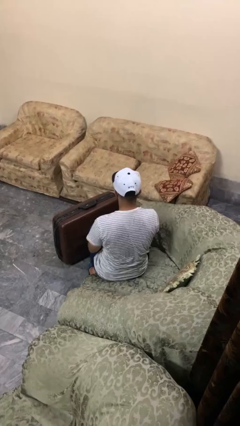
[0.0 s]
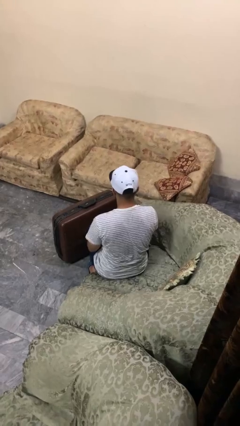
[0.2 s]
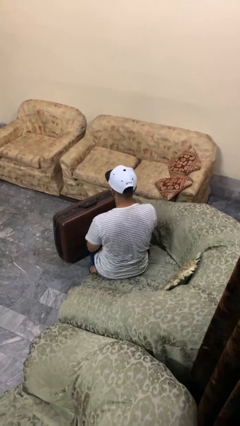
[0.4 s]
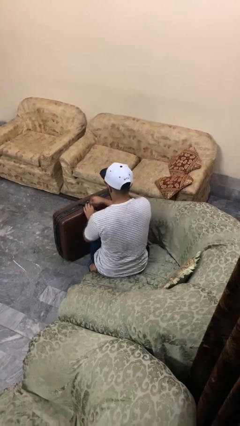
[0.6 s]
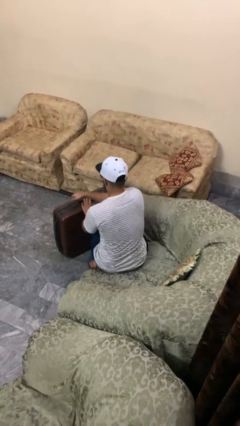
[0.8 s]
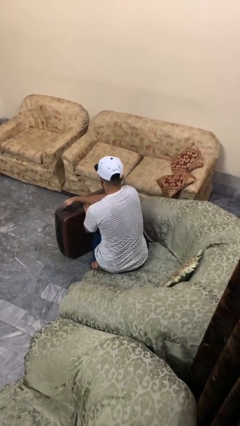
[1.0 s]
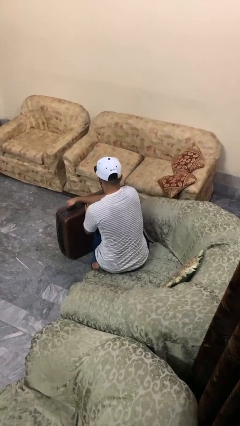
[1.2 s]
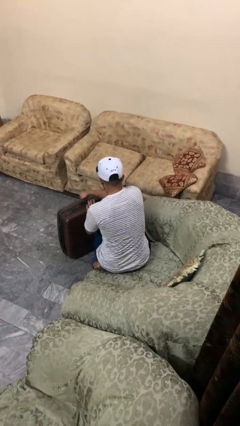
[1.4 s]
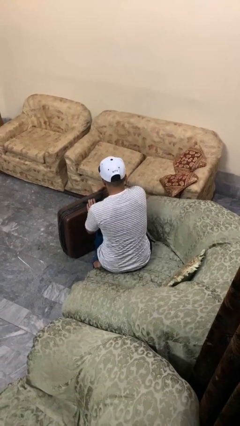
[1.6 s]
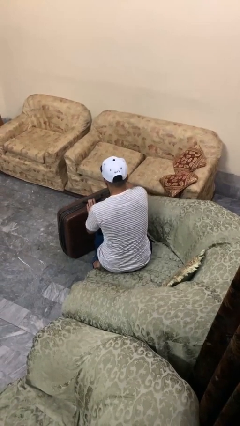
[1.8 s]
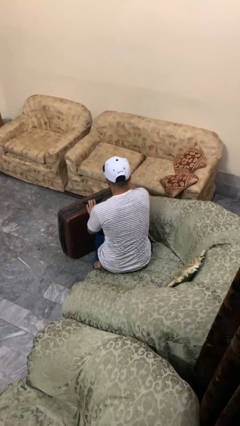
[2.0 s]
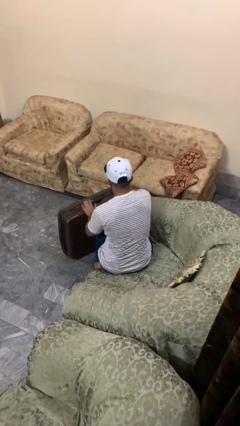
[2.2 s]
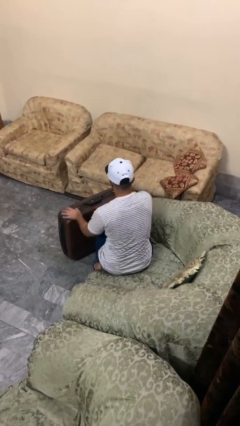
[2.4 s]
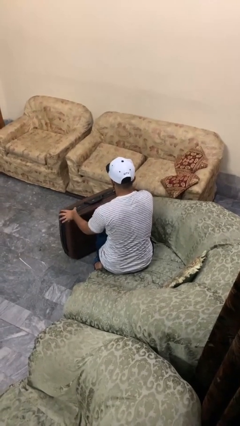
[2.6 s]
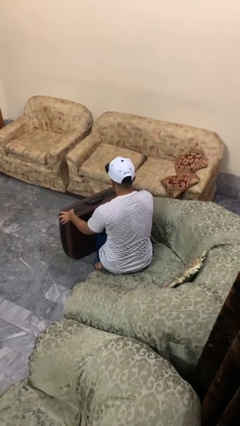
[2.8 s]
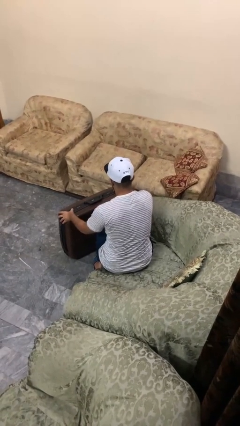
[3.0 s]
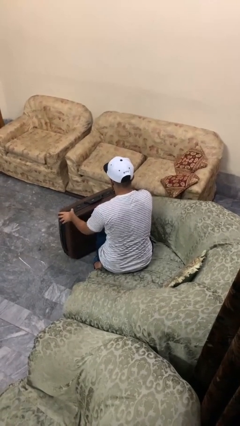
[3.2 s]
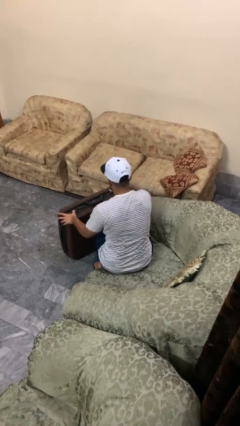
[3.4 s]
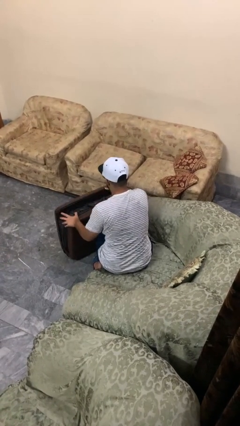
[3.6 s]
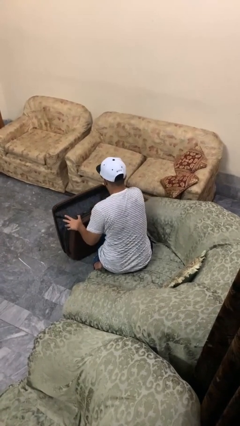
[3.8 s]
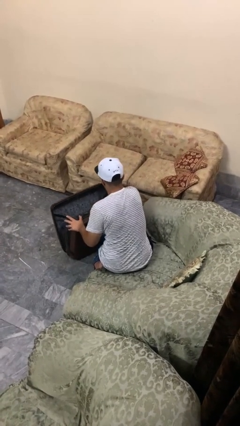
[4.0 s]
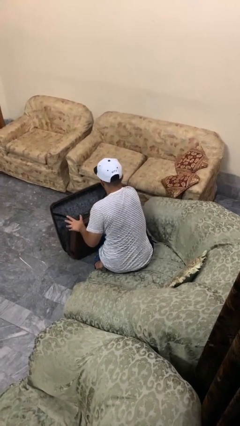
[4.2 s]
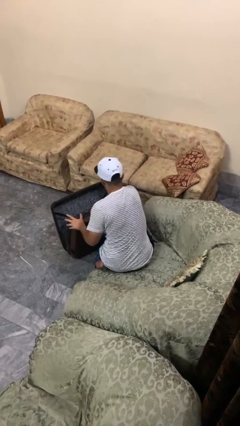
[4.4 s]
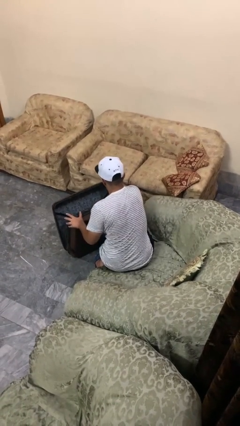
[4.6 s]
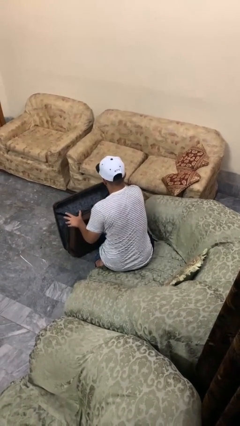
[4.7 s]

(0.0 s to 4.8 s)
person opens suitcase

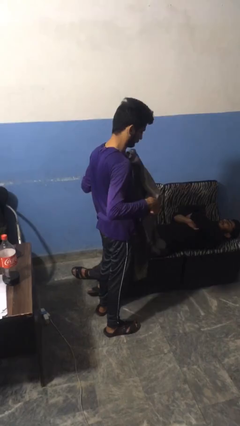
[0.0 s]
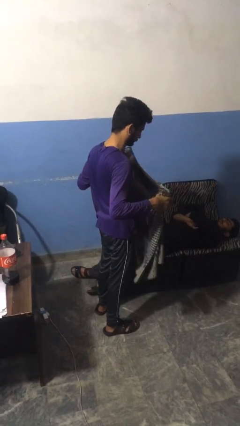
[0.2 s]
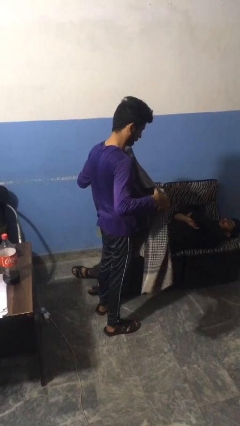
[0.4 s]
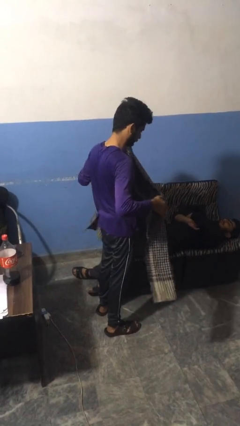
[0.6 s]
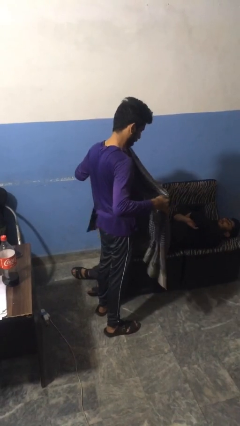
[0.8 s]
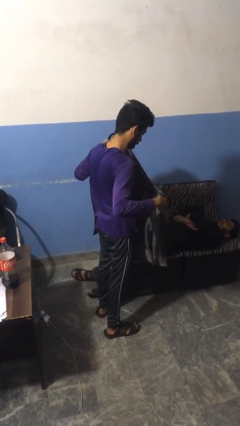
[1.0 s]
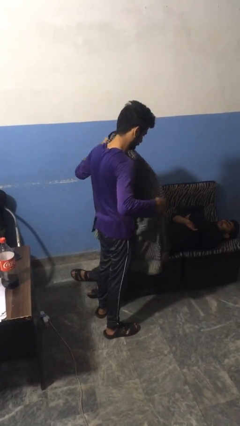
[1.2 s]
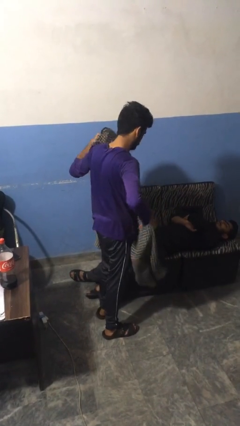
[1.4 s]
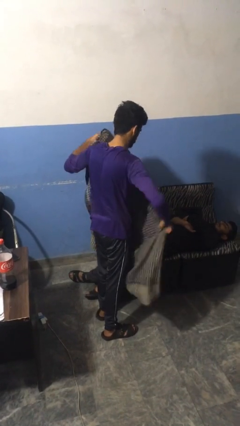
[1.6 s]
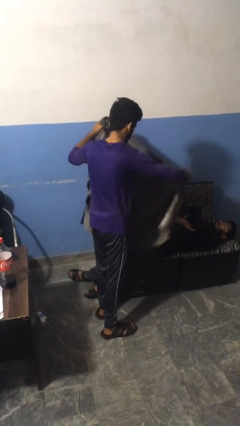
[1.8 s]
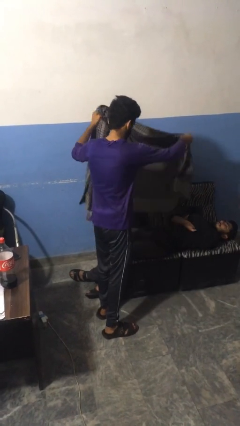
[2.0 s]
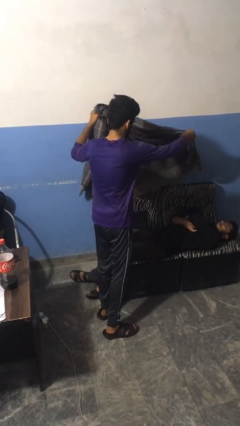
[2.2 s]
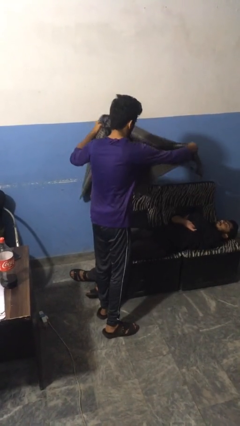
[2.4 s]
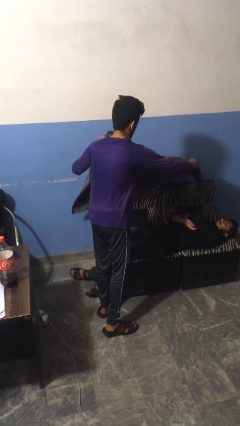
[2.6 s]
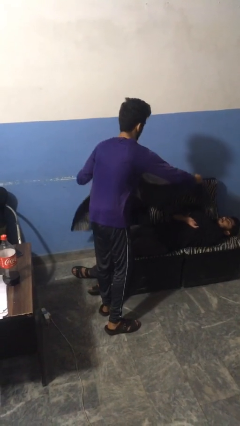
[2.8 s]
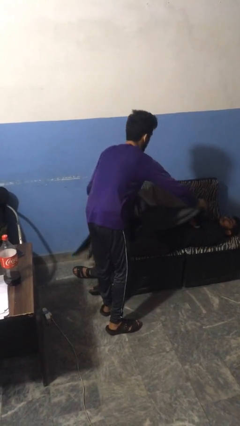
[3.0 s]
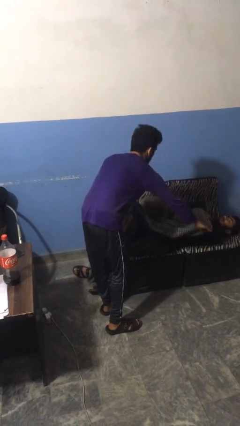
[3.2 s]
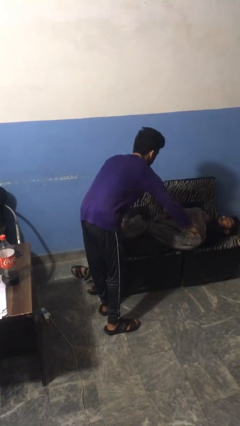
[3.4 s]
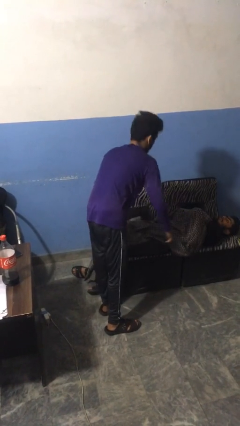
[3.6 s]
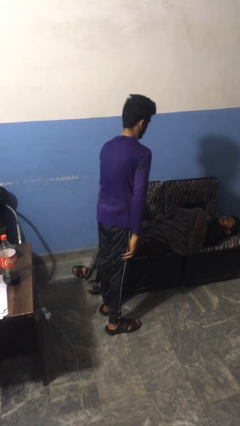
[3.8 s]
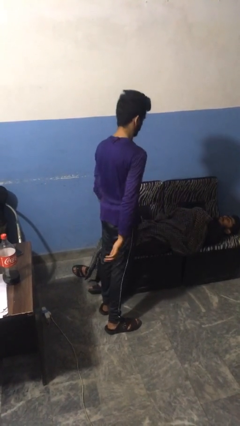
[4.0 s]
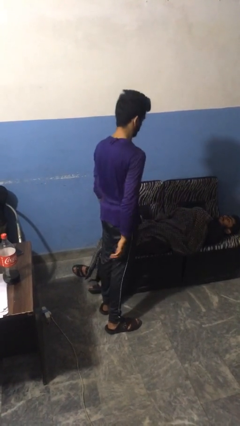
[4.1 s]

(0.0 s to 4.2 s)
person covers friend with blanket

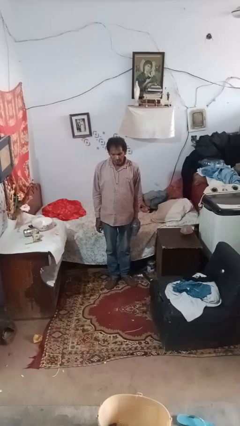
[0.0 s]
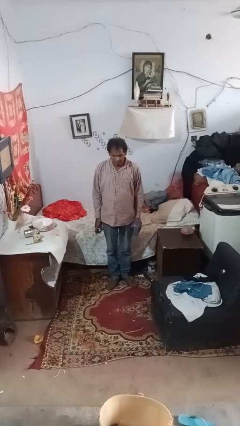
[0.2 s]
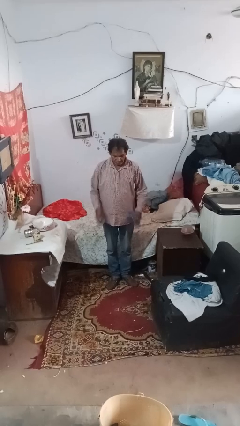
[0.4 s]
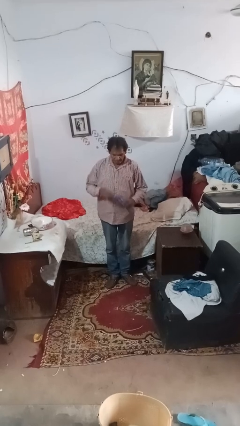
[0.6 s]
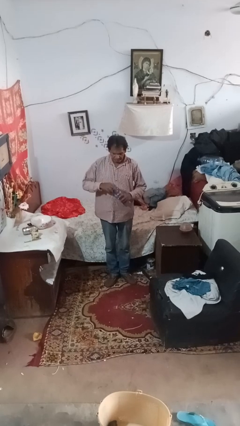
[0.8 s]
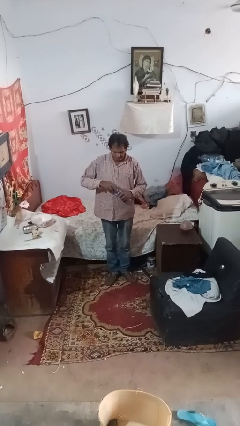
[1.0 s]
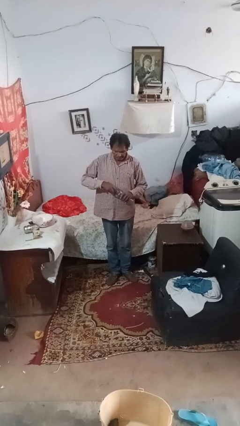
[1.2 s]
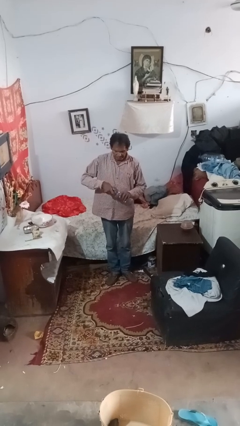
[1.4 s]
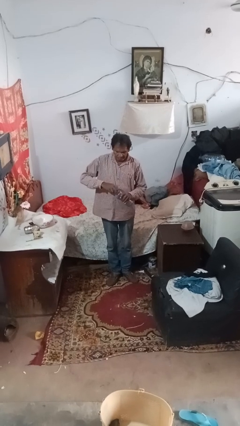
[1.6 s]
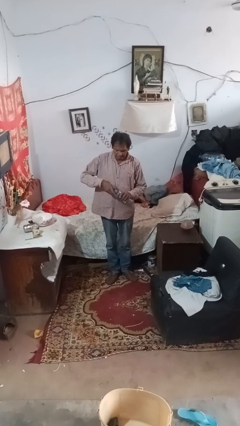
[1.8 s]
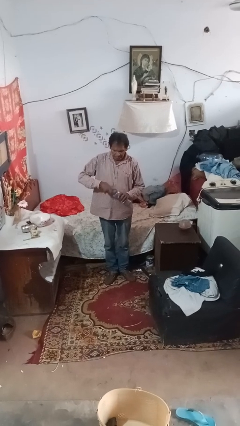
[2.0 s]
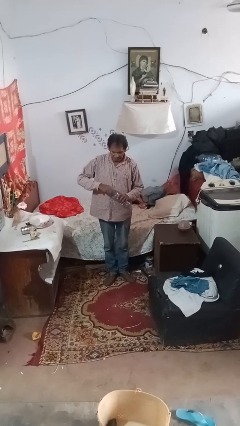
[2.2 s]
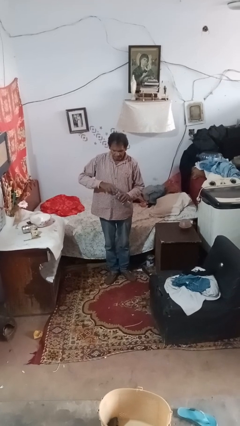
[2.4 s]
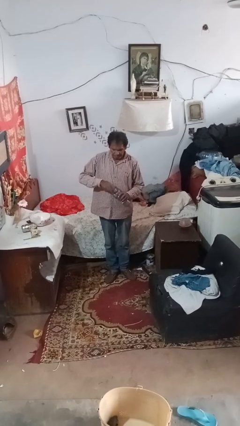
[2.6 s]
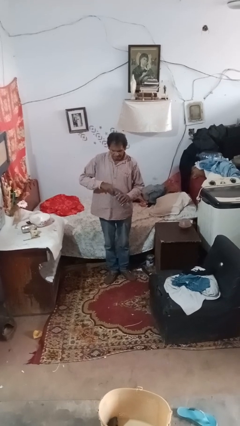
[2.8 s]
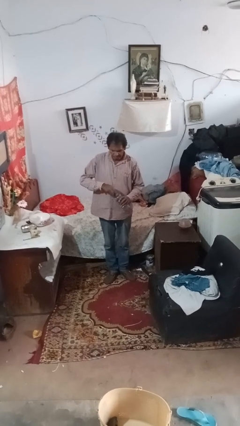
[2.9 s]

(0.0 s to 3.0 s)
person screws lid to bottle

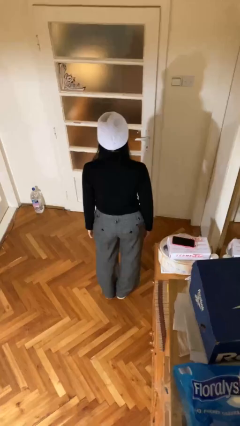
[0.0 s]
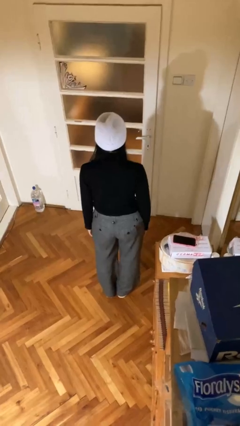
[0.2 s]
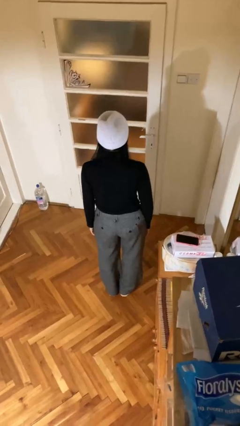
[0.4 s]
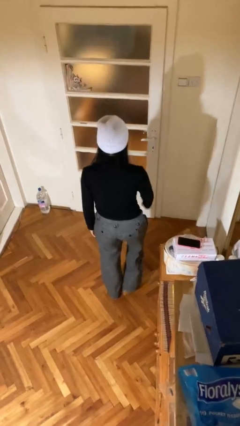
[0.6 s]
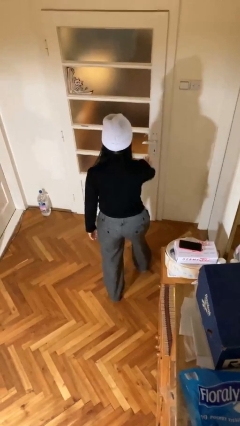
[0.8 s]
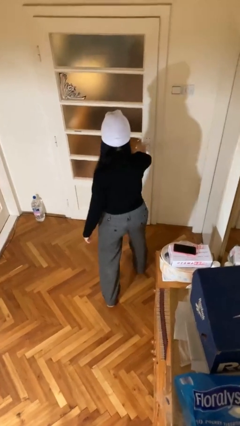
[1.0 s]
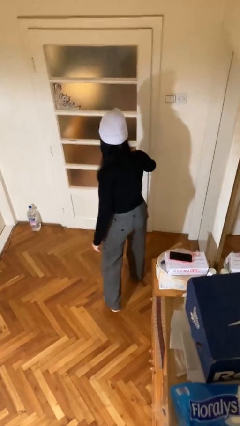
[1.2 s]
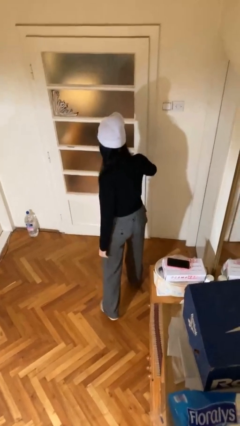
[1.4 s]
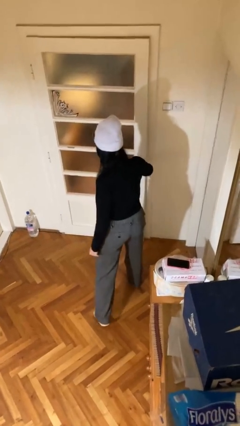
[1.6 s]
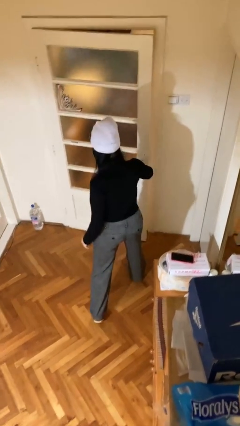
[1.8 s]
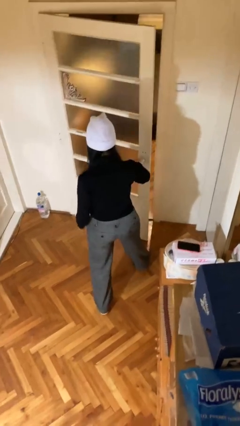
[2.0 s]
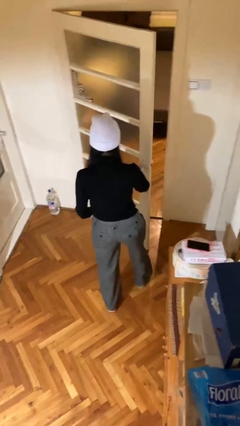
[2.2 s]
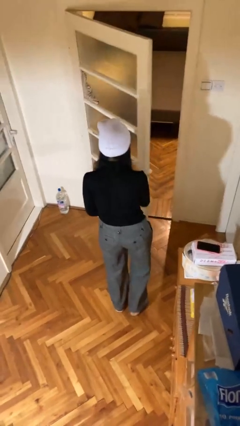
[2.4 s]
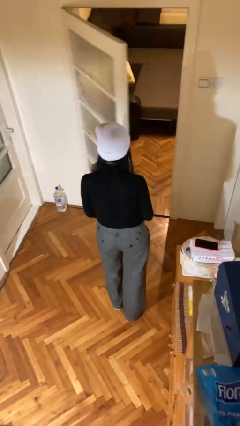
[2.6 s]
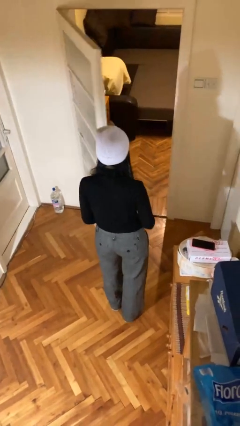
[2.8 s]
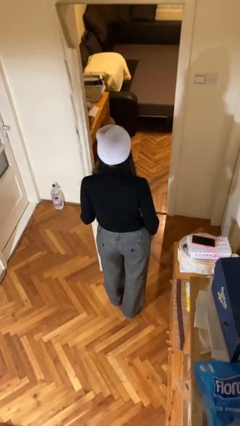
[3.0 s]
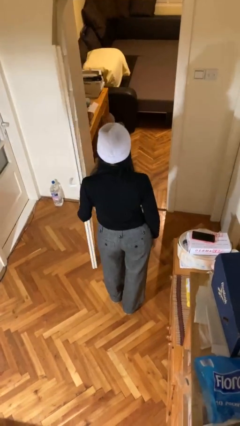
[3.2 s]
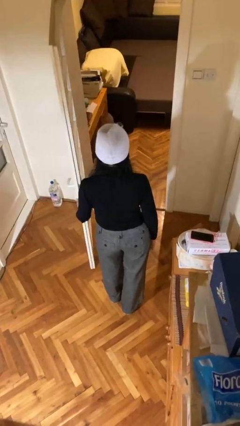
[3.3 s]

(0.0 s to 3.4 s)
person opens facility door

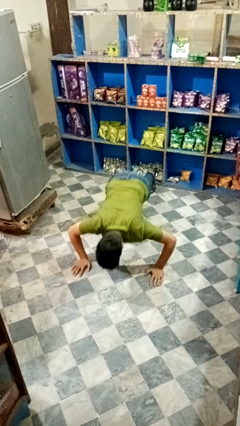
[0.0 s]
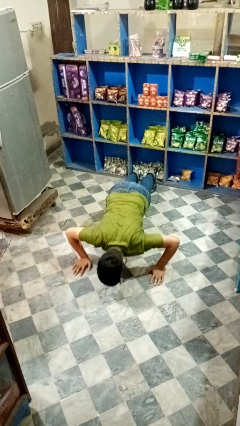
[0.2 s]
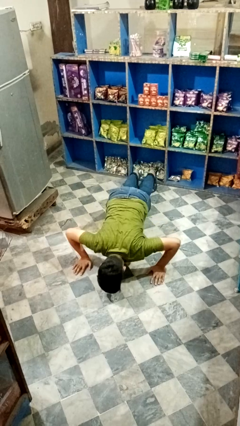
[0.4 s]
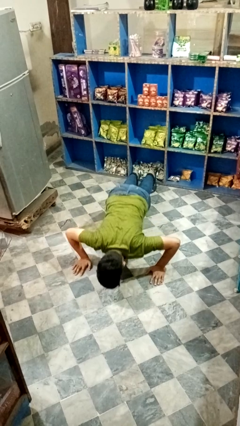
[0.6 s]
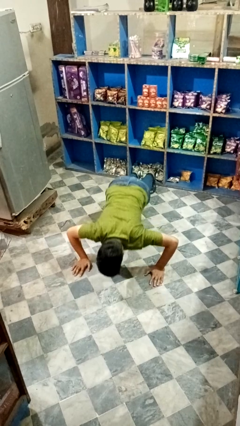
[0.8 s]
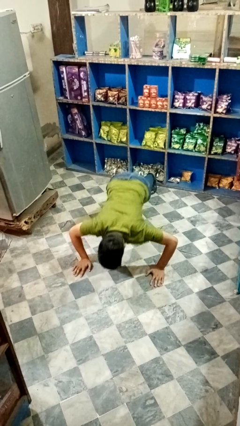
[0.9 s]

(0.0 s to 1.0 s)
person exercises with pushup

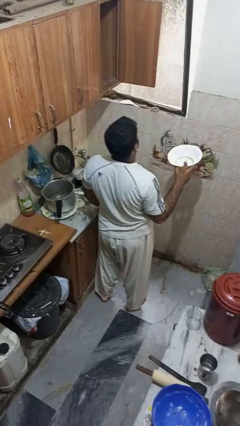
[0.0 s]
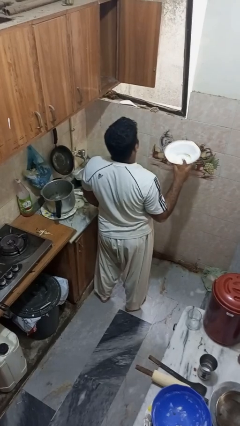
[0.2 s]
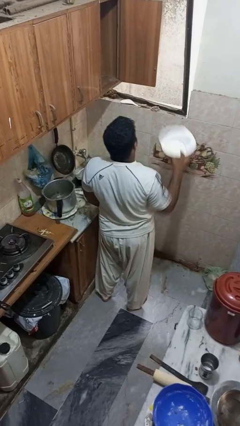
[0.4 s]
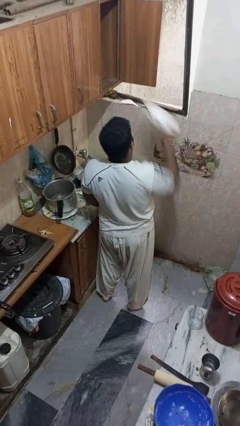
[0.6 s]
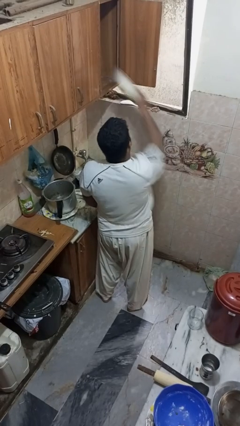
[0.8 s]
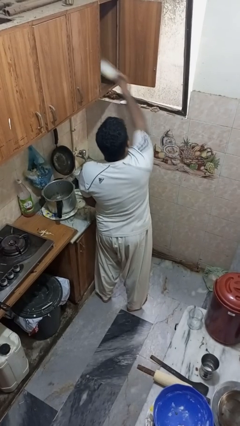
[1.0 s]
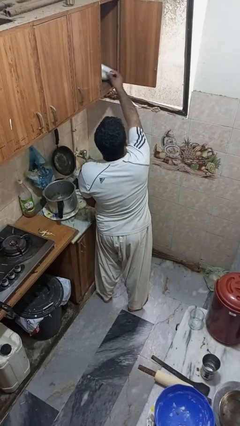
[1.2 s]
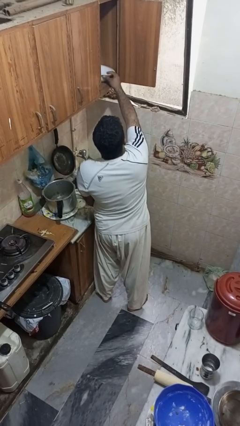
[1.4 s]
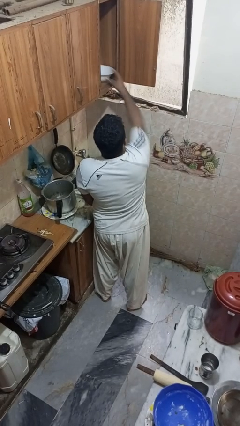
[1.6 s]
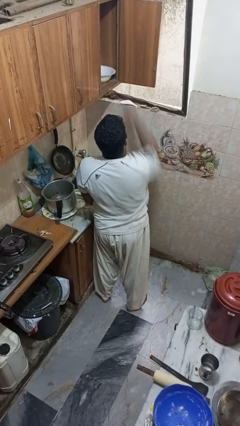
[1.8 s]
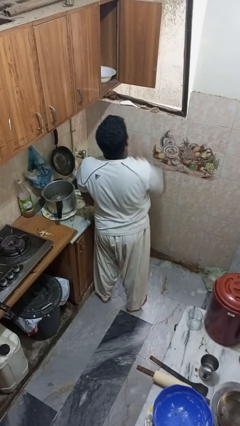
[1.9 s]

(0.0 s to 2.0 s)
person puts object in cabinet
